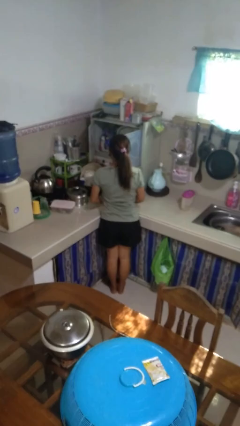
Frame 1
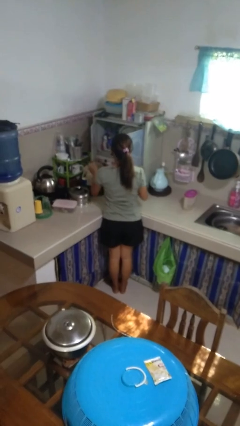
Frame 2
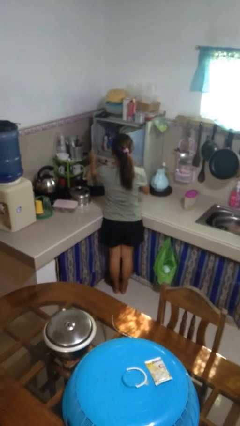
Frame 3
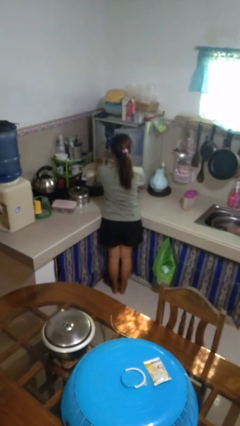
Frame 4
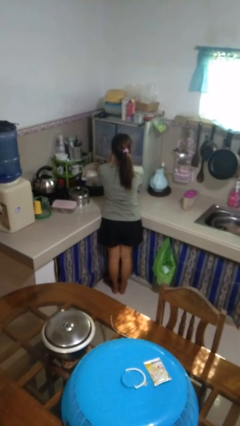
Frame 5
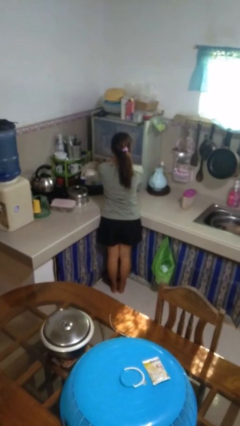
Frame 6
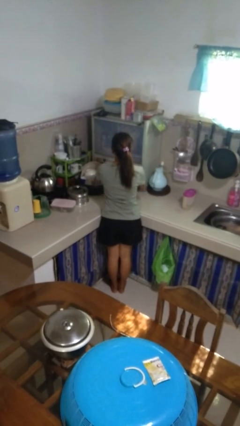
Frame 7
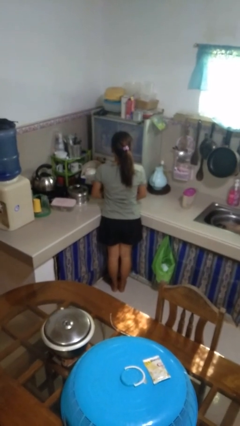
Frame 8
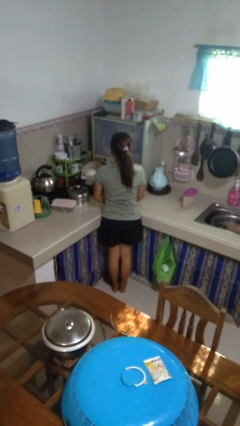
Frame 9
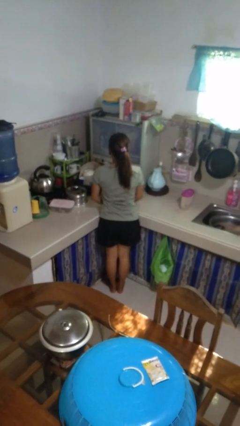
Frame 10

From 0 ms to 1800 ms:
person closes kitchen drawer

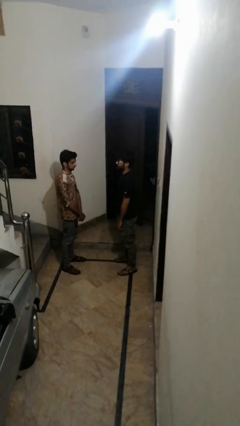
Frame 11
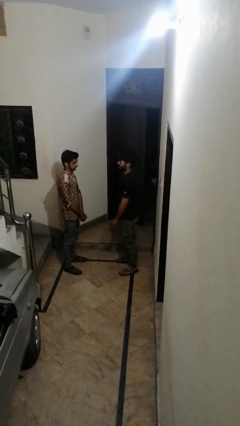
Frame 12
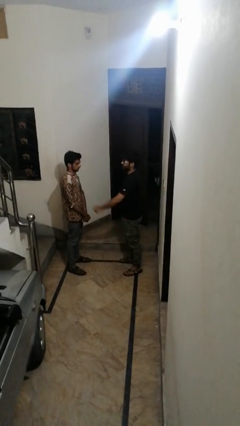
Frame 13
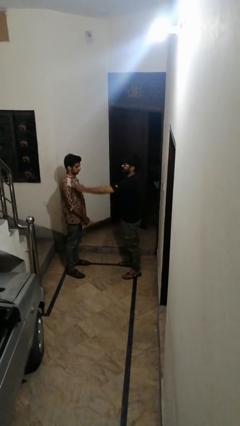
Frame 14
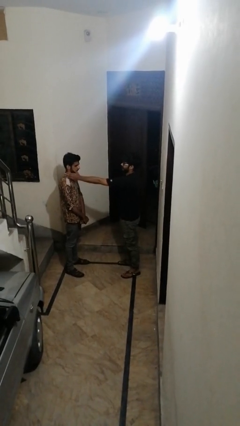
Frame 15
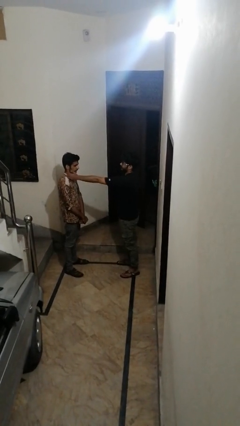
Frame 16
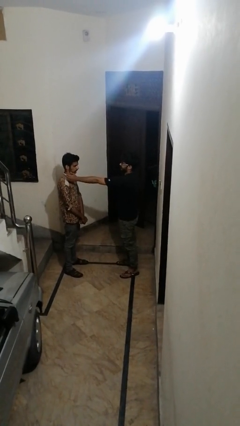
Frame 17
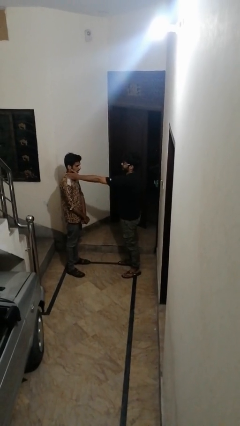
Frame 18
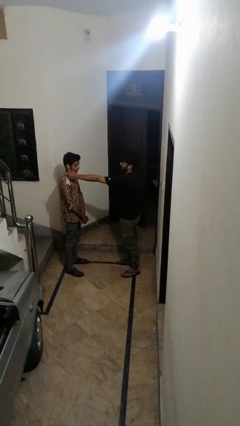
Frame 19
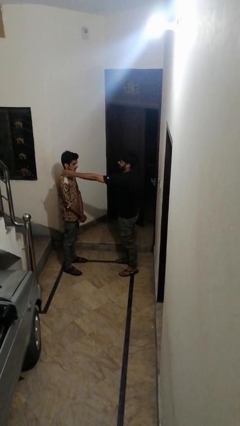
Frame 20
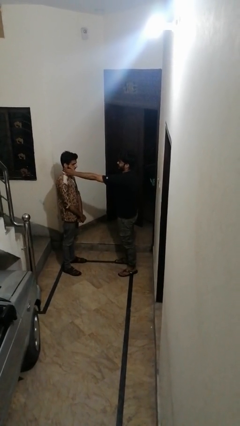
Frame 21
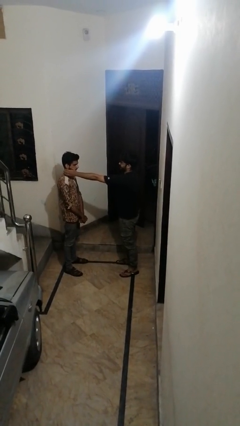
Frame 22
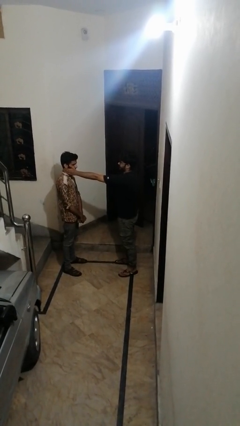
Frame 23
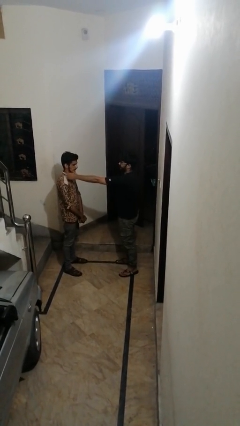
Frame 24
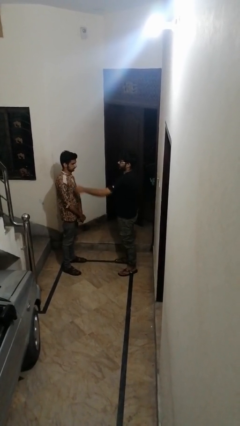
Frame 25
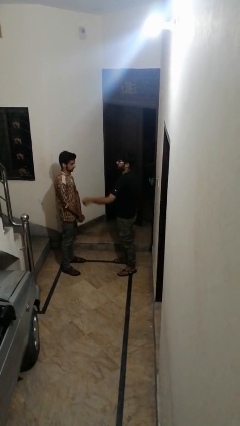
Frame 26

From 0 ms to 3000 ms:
person touches face of person

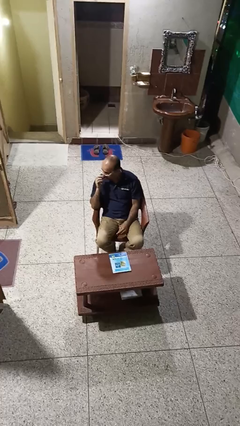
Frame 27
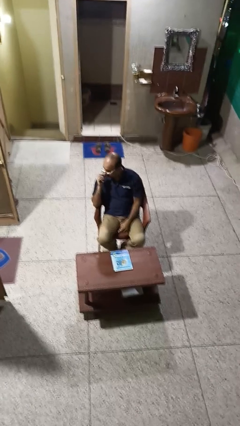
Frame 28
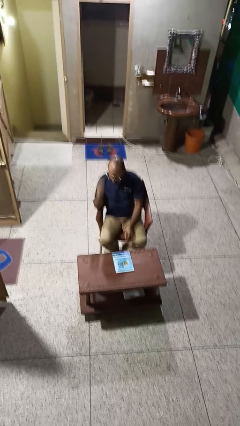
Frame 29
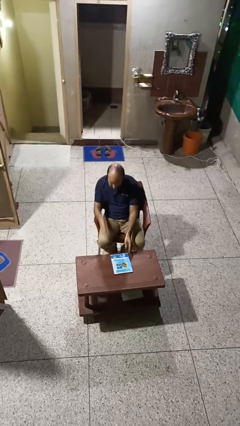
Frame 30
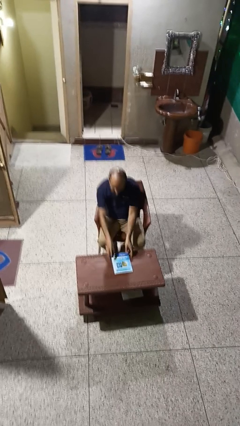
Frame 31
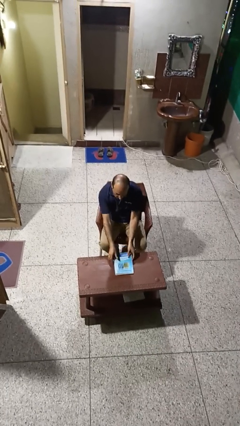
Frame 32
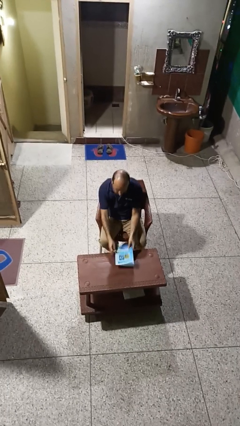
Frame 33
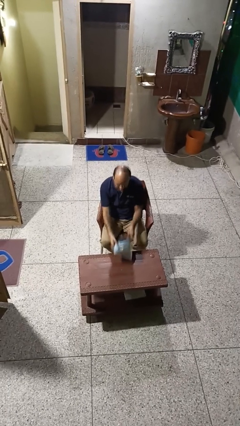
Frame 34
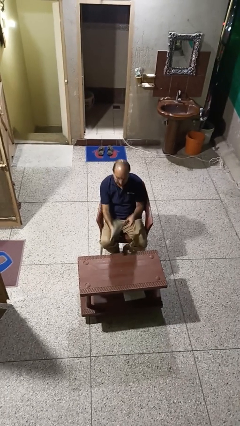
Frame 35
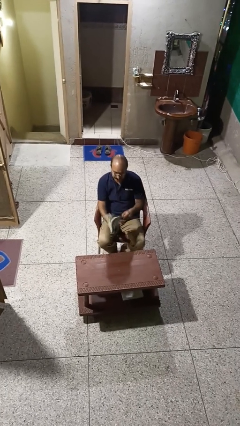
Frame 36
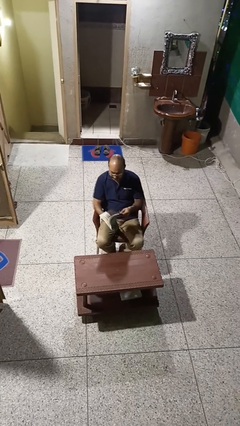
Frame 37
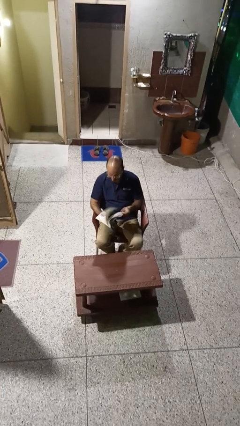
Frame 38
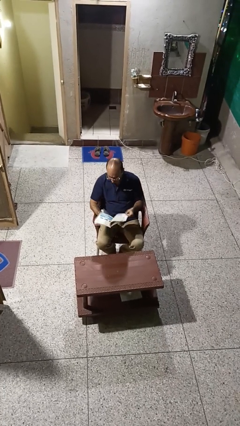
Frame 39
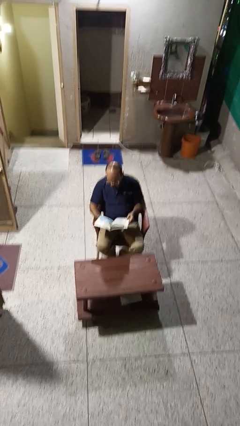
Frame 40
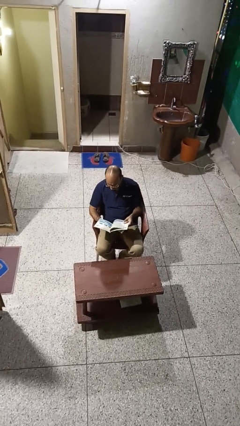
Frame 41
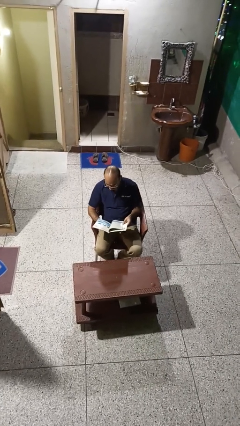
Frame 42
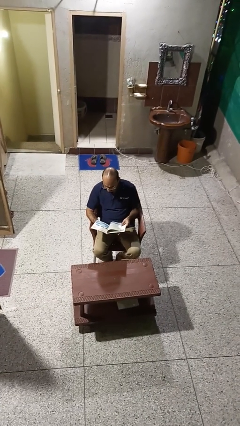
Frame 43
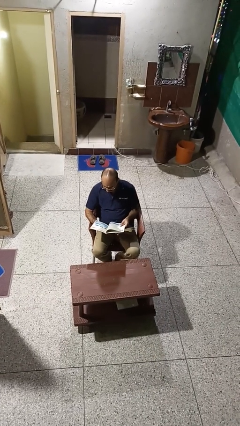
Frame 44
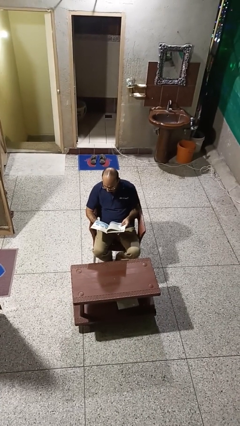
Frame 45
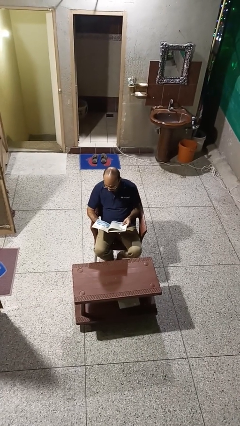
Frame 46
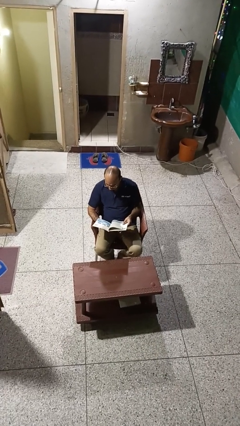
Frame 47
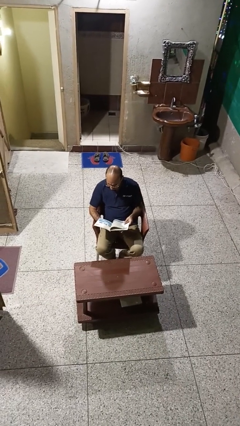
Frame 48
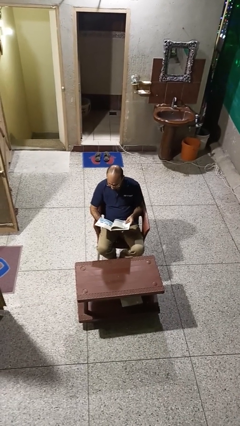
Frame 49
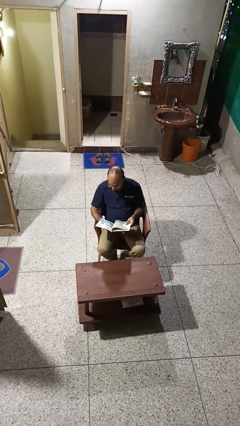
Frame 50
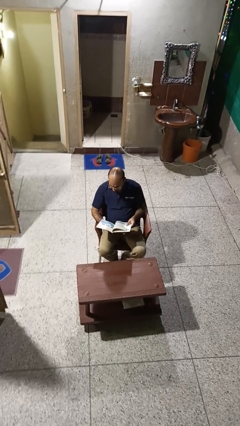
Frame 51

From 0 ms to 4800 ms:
person reads book

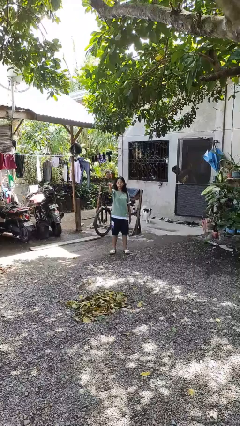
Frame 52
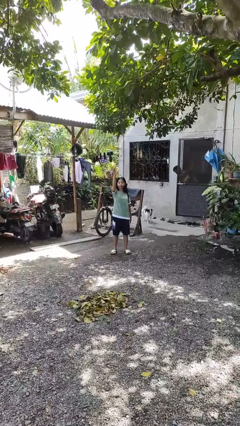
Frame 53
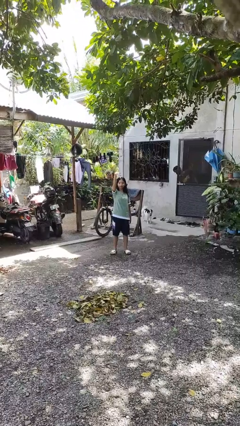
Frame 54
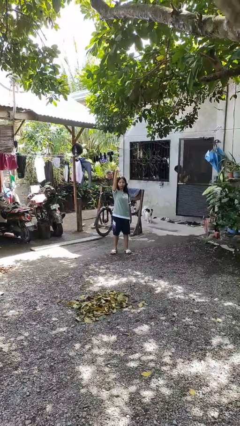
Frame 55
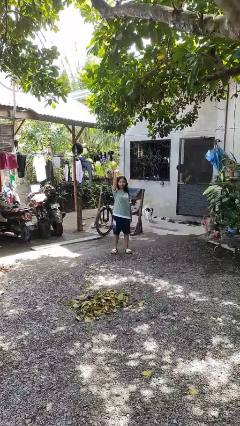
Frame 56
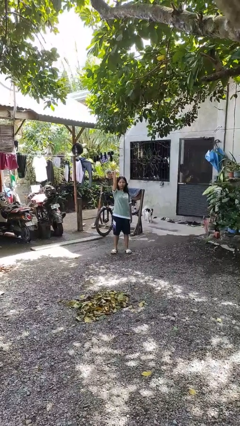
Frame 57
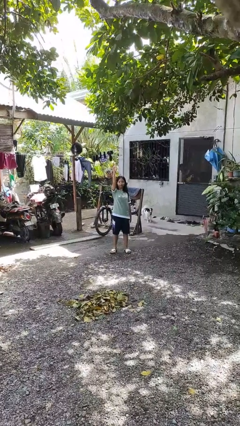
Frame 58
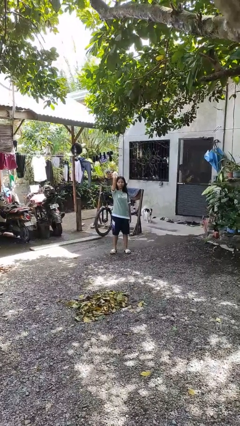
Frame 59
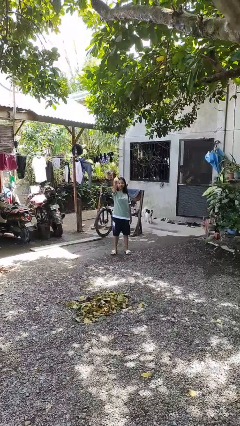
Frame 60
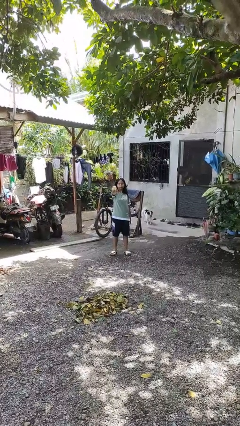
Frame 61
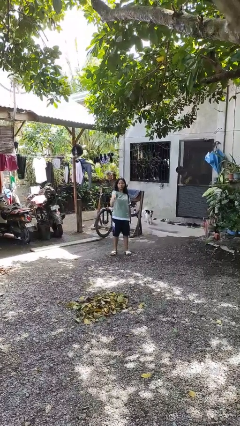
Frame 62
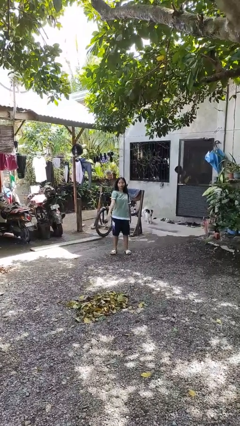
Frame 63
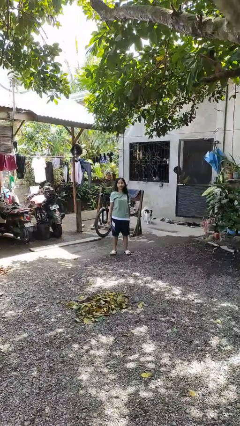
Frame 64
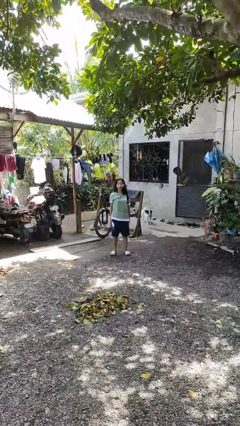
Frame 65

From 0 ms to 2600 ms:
person gestures come here

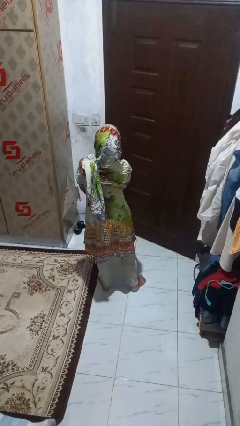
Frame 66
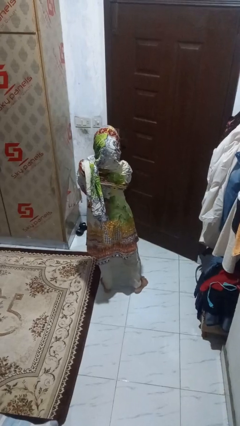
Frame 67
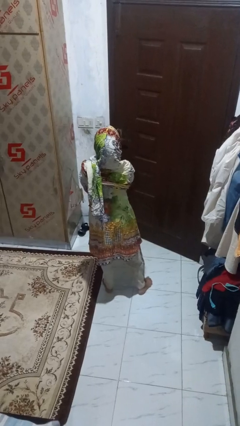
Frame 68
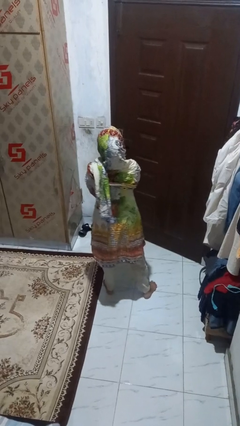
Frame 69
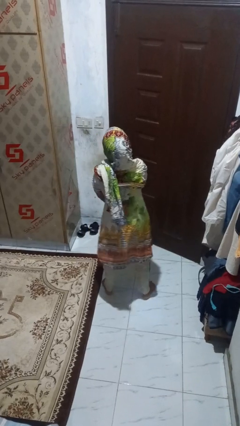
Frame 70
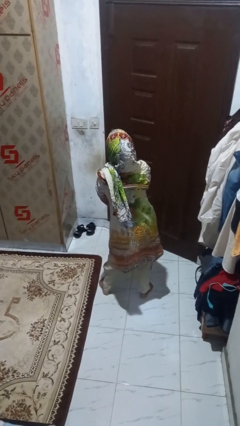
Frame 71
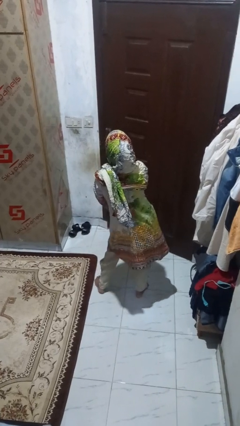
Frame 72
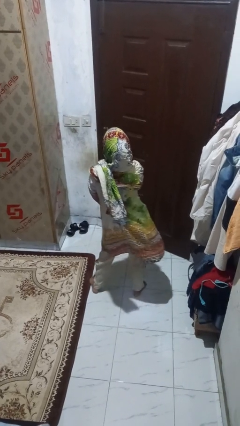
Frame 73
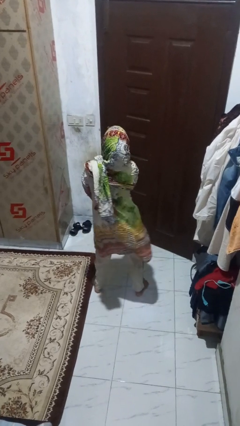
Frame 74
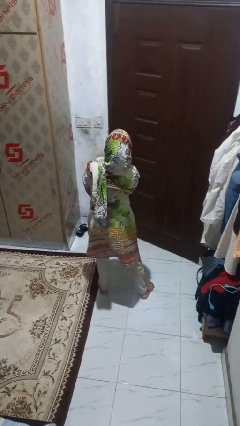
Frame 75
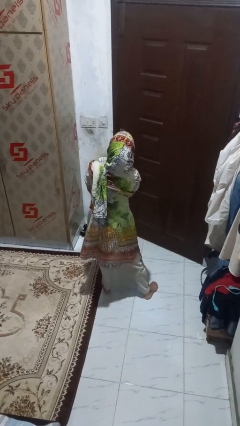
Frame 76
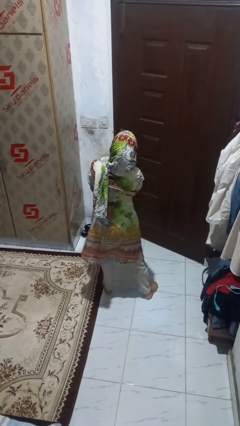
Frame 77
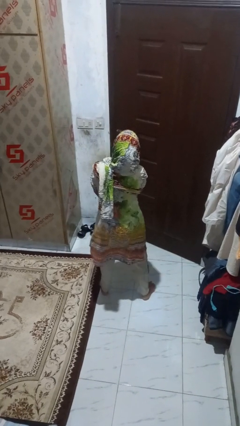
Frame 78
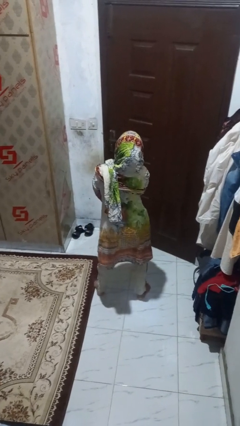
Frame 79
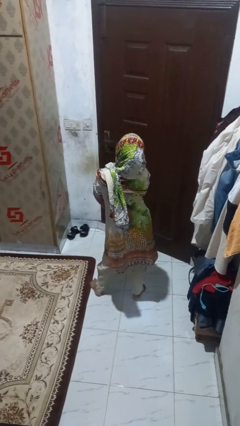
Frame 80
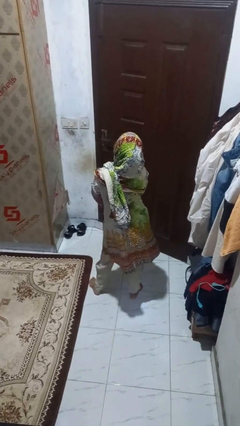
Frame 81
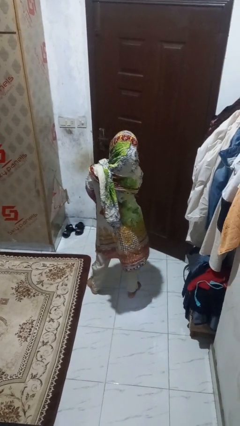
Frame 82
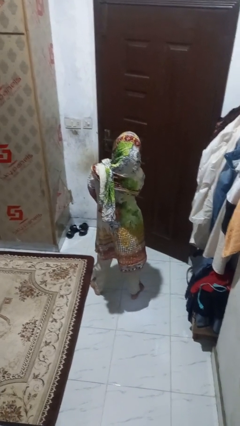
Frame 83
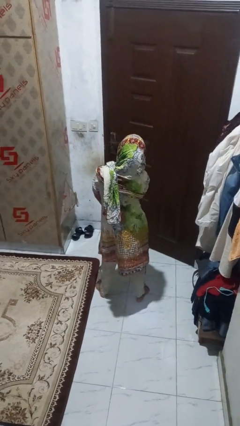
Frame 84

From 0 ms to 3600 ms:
person wiggles hips

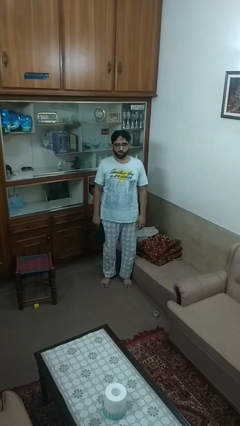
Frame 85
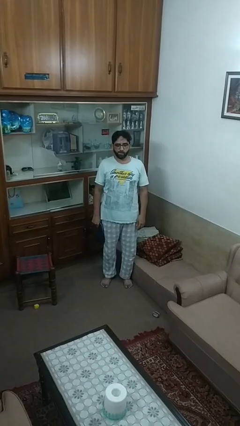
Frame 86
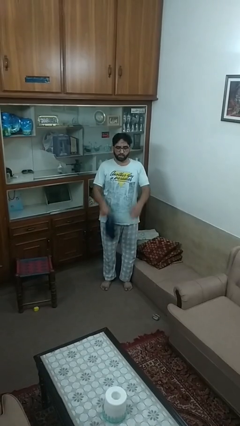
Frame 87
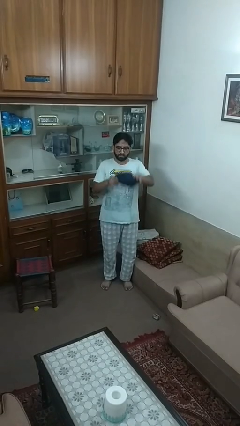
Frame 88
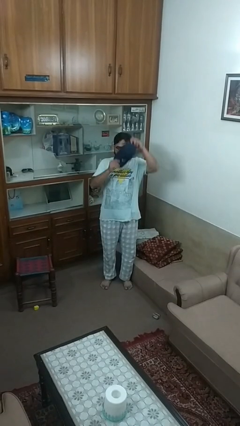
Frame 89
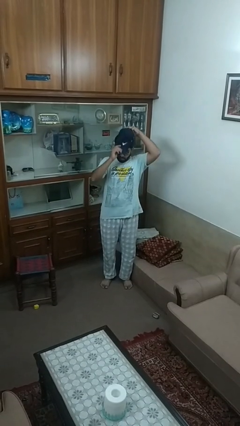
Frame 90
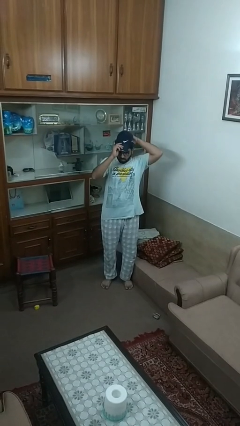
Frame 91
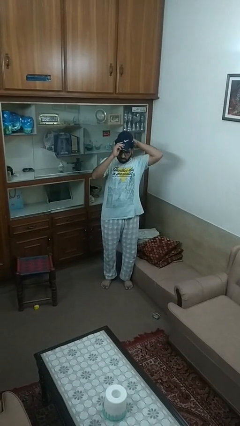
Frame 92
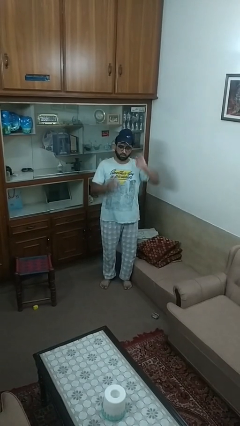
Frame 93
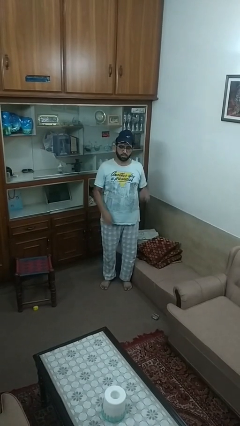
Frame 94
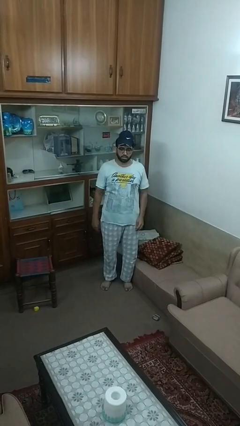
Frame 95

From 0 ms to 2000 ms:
person puts on hat
